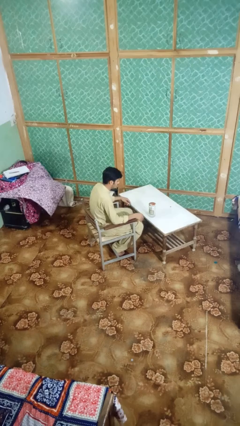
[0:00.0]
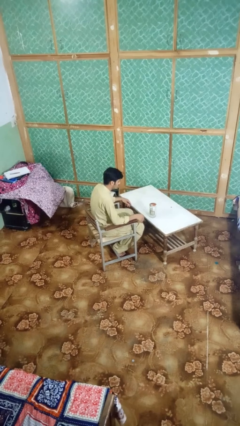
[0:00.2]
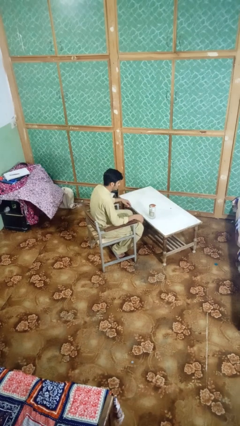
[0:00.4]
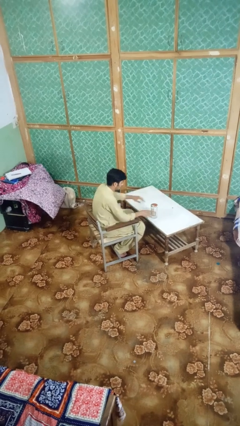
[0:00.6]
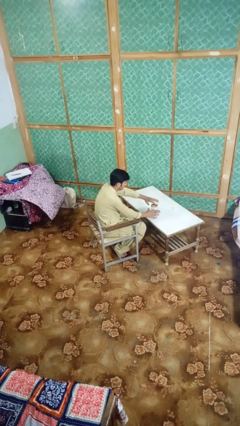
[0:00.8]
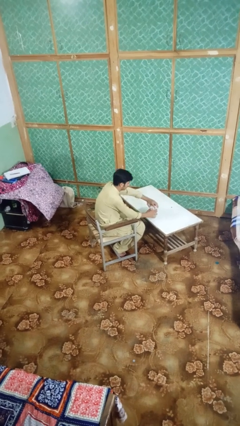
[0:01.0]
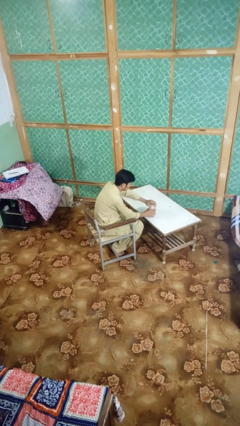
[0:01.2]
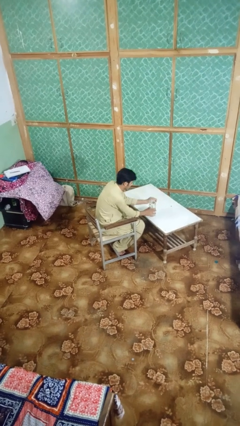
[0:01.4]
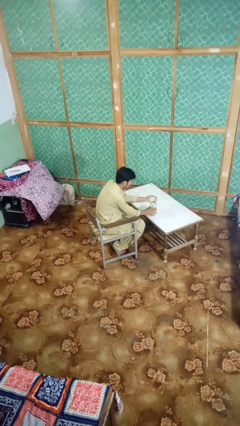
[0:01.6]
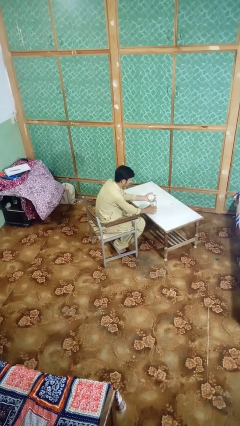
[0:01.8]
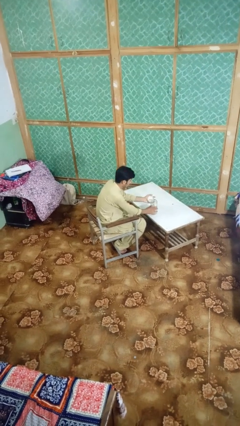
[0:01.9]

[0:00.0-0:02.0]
person opens jar

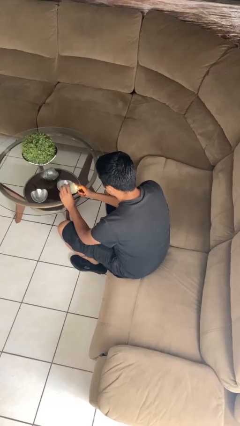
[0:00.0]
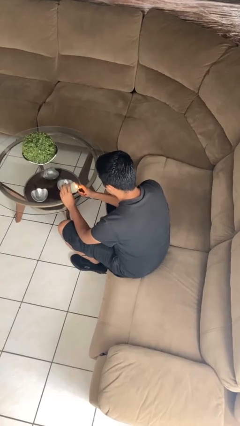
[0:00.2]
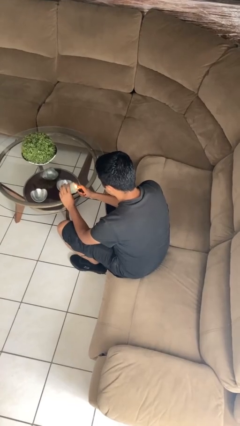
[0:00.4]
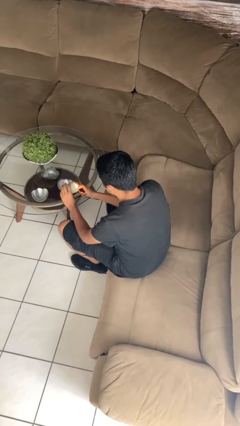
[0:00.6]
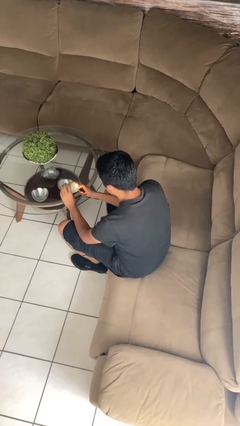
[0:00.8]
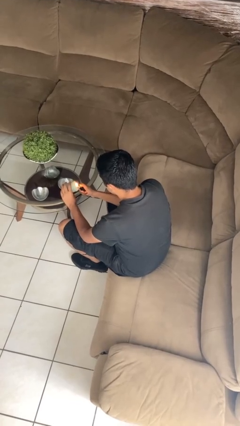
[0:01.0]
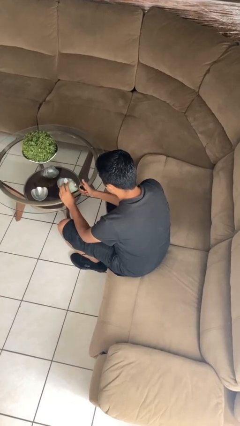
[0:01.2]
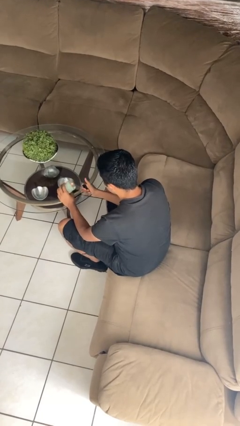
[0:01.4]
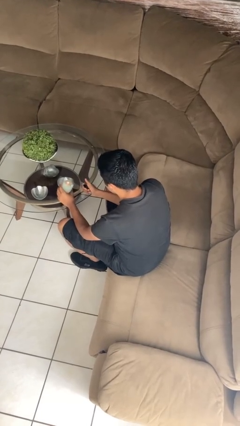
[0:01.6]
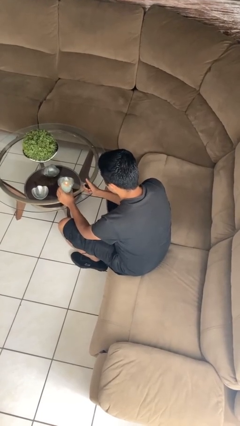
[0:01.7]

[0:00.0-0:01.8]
person lights candle

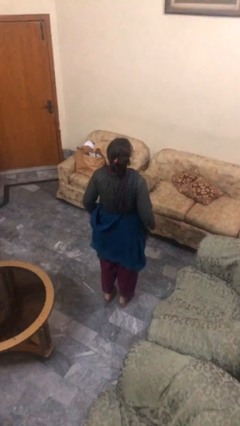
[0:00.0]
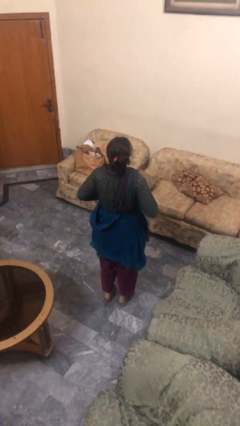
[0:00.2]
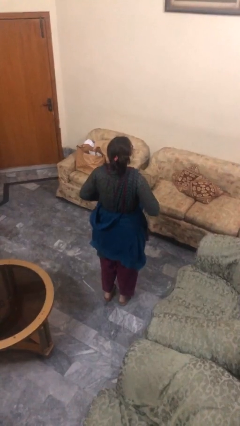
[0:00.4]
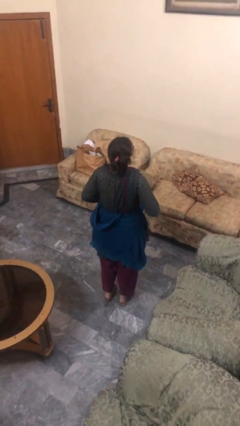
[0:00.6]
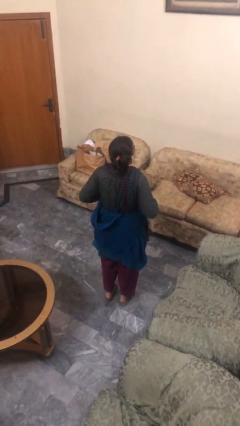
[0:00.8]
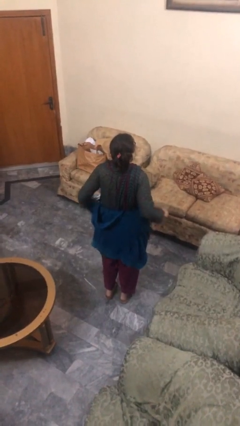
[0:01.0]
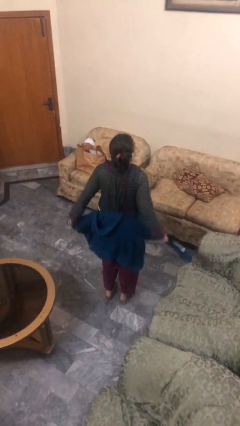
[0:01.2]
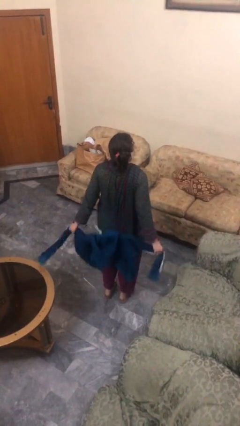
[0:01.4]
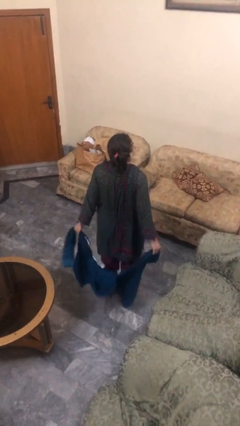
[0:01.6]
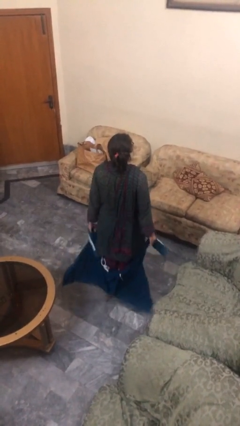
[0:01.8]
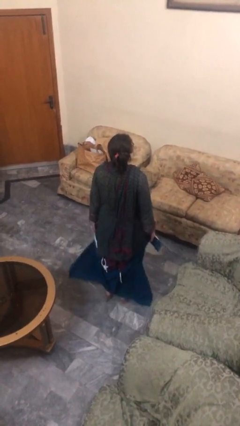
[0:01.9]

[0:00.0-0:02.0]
person unties jacket around waist

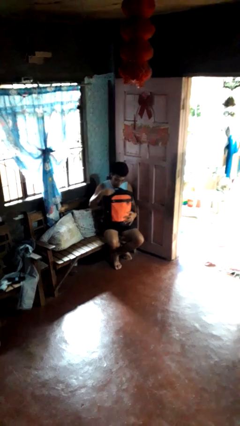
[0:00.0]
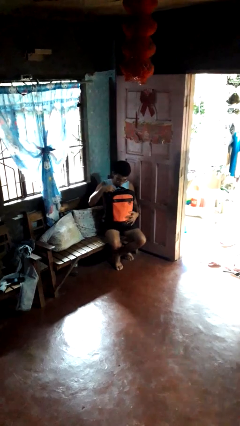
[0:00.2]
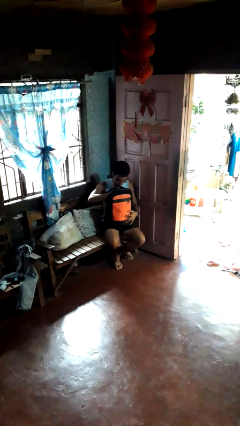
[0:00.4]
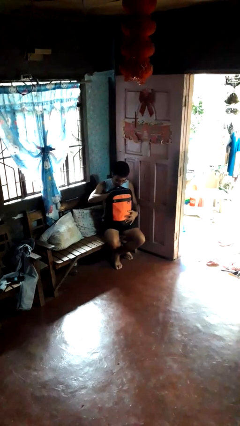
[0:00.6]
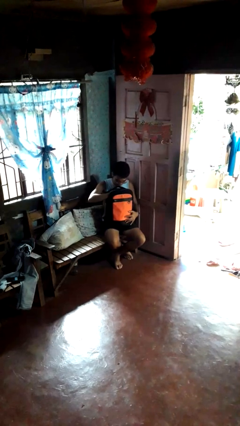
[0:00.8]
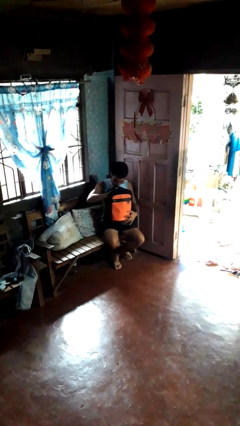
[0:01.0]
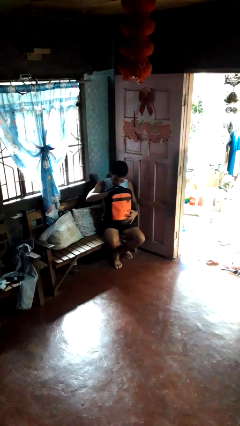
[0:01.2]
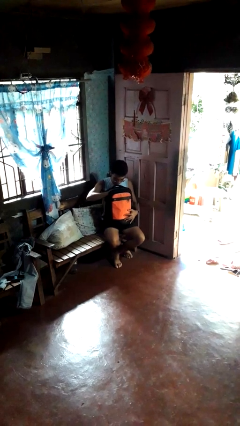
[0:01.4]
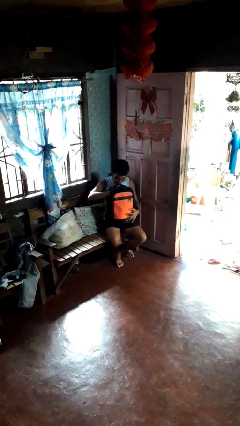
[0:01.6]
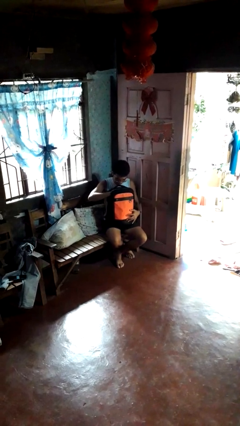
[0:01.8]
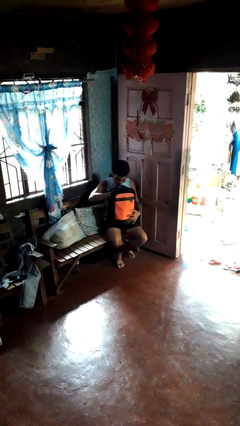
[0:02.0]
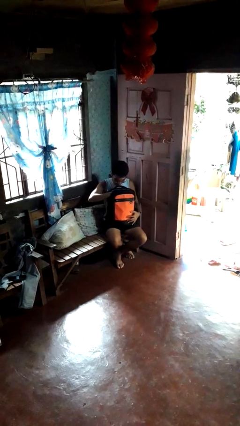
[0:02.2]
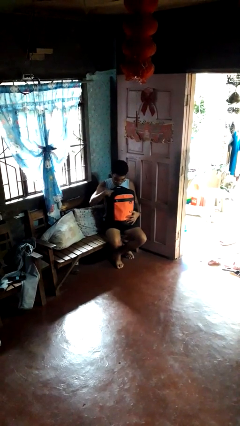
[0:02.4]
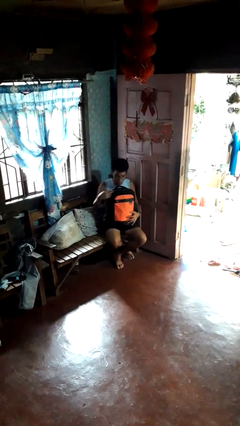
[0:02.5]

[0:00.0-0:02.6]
person searches in bag

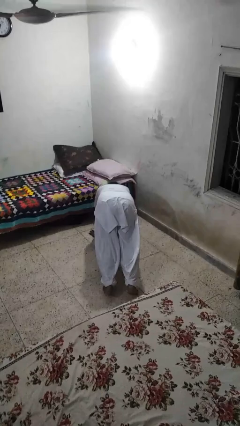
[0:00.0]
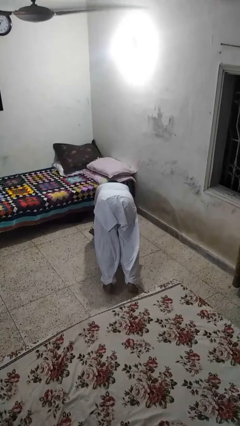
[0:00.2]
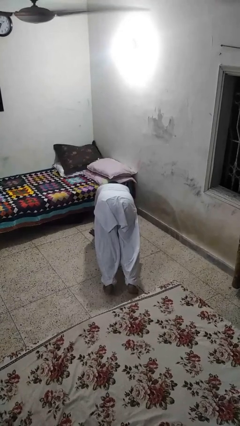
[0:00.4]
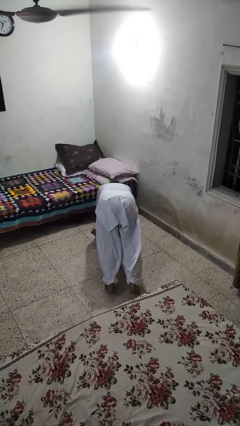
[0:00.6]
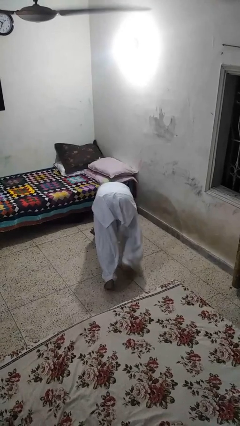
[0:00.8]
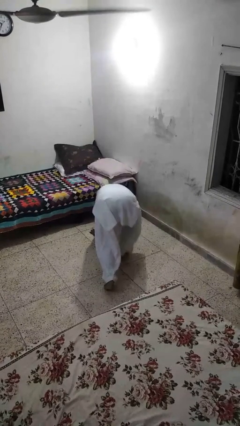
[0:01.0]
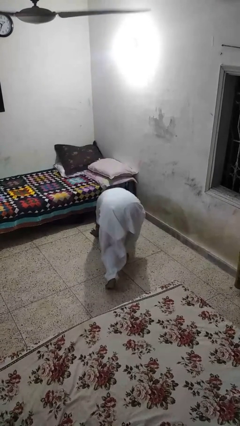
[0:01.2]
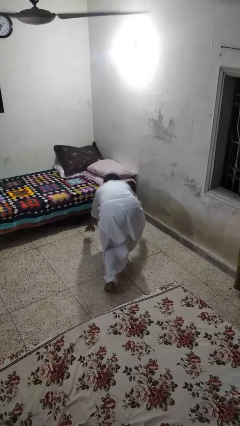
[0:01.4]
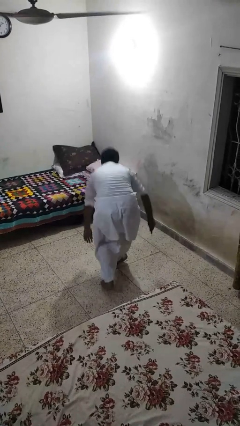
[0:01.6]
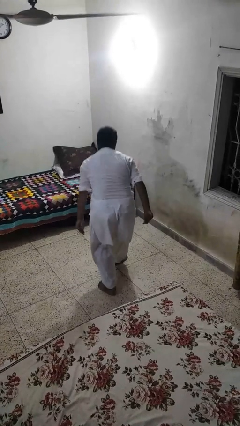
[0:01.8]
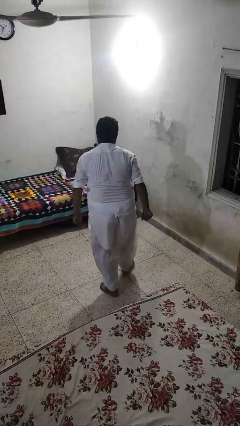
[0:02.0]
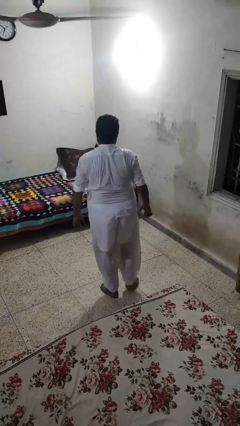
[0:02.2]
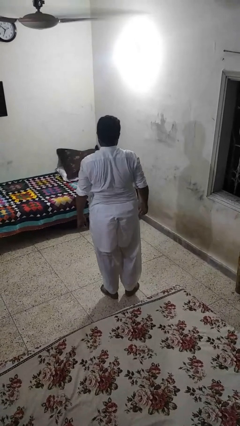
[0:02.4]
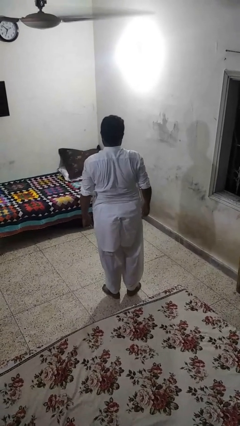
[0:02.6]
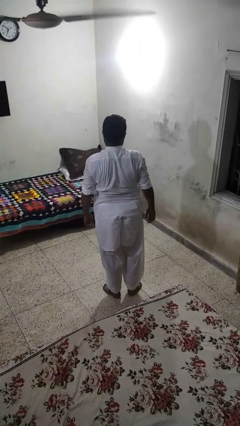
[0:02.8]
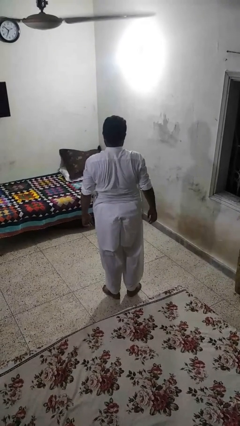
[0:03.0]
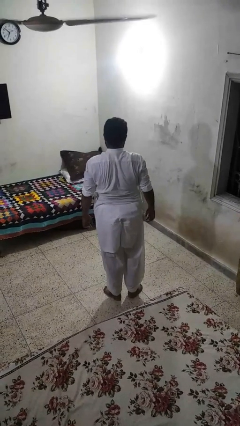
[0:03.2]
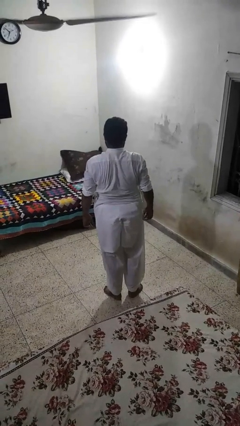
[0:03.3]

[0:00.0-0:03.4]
person stands up from floor

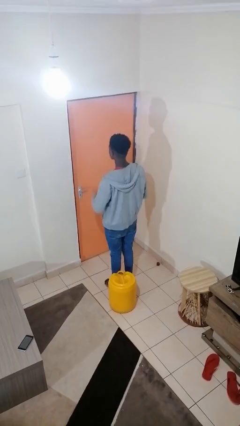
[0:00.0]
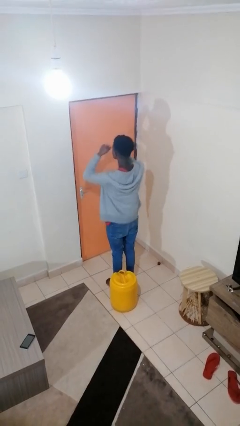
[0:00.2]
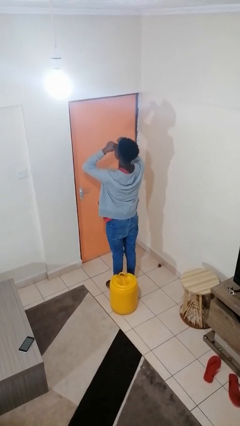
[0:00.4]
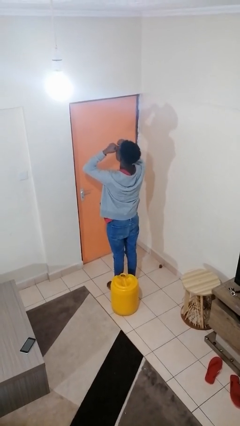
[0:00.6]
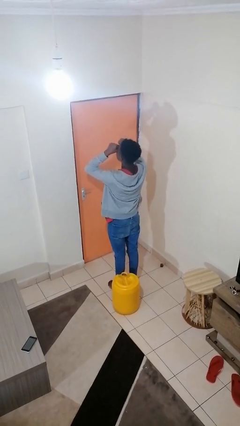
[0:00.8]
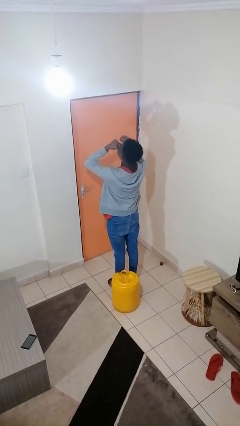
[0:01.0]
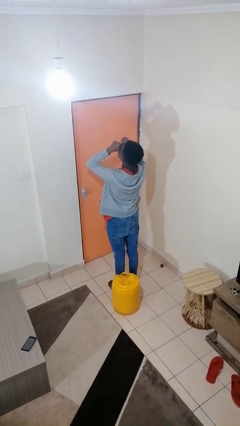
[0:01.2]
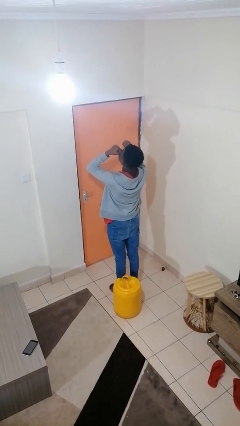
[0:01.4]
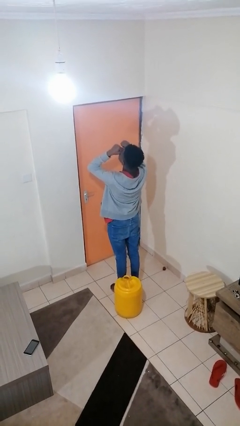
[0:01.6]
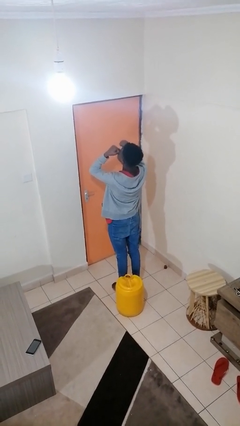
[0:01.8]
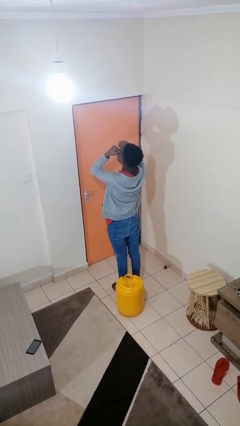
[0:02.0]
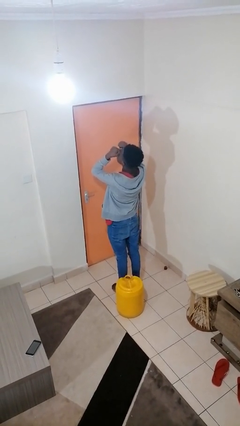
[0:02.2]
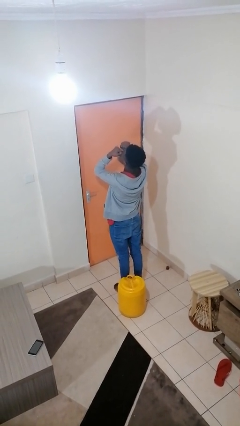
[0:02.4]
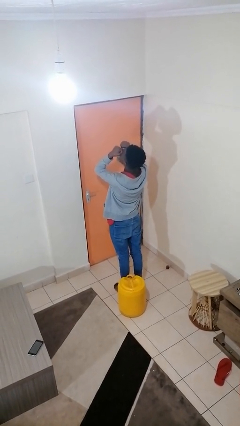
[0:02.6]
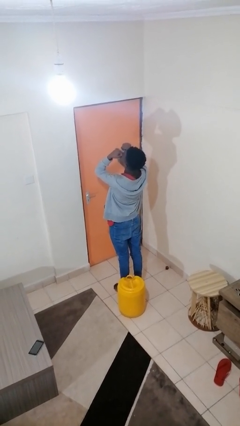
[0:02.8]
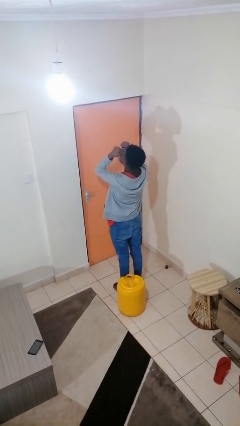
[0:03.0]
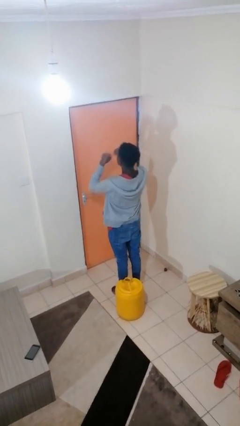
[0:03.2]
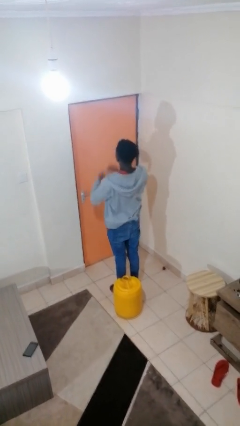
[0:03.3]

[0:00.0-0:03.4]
person rubs eyes

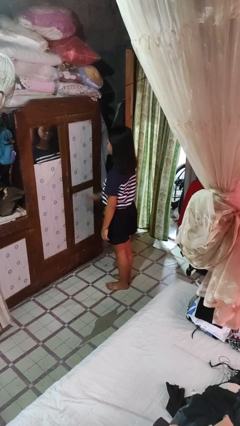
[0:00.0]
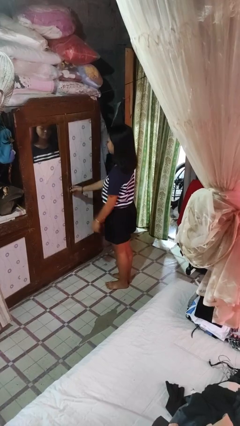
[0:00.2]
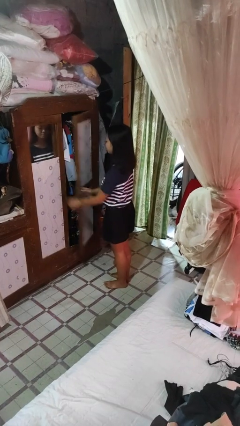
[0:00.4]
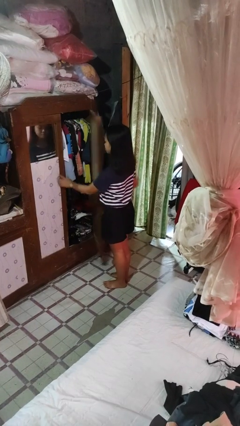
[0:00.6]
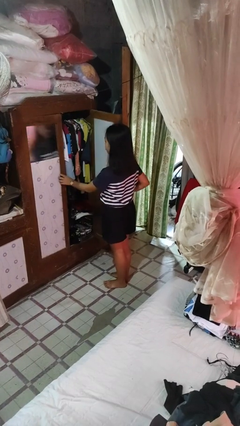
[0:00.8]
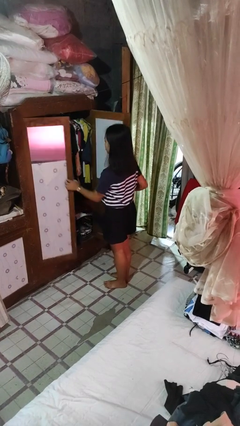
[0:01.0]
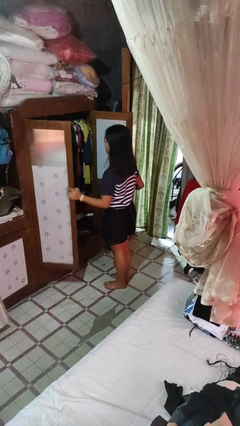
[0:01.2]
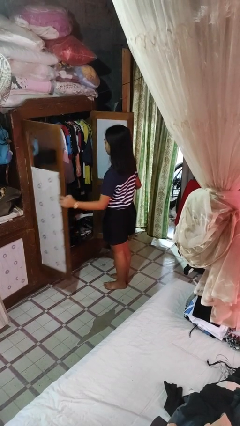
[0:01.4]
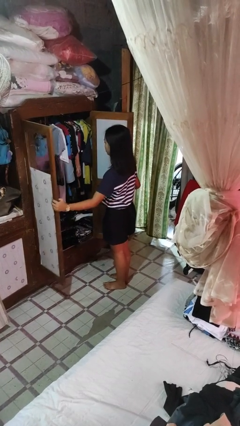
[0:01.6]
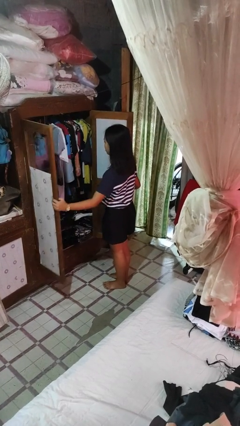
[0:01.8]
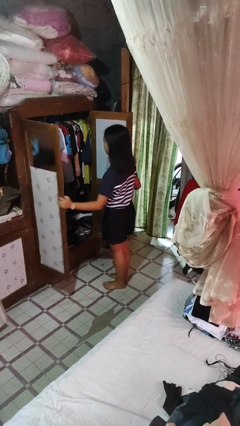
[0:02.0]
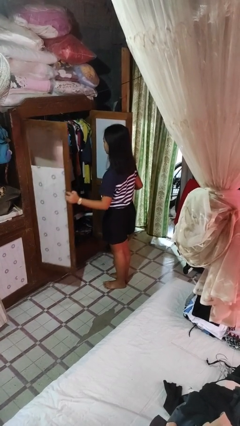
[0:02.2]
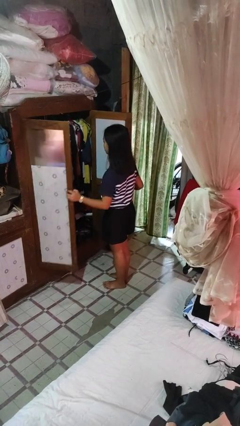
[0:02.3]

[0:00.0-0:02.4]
person opens closet door
